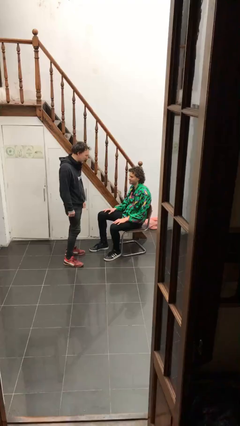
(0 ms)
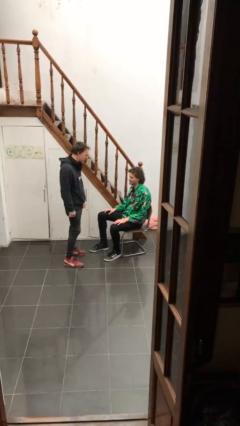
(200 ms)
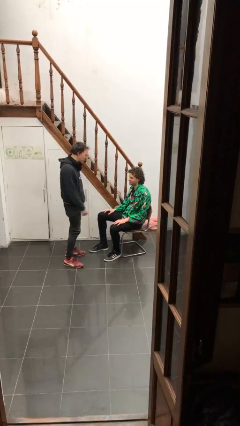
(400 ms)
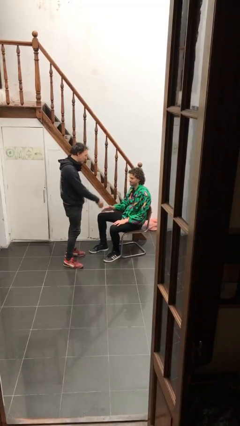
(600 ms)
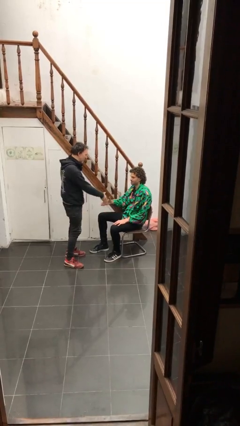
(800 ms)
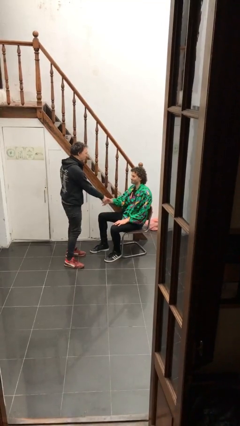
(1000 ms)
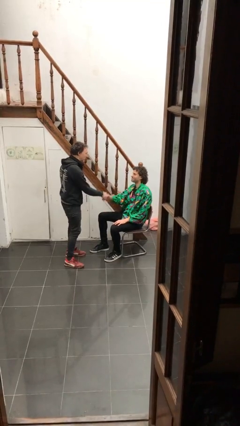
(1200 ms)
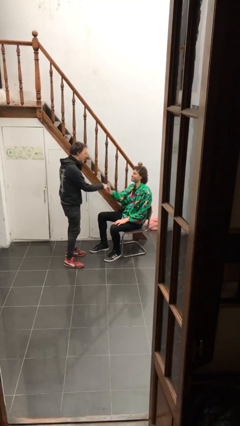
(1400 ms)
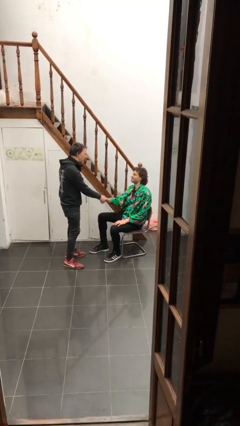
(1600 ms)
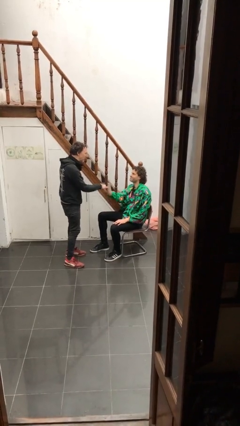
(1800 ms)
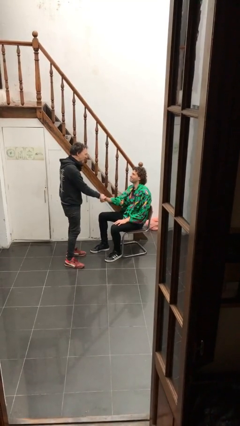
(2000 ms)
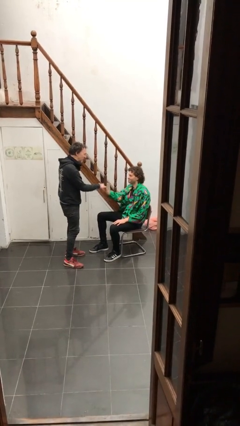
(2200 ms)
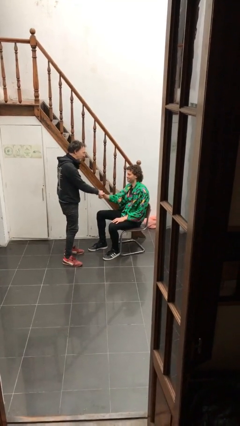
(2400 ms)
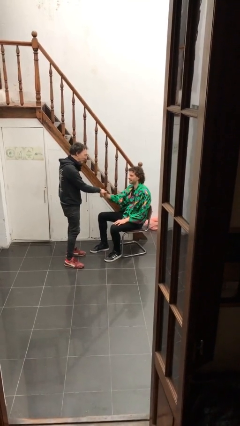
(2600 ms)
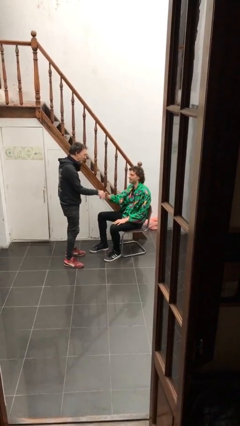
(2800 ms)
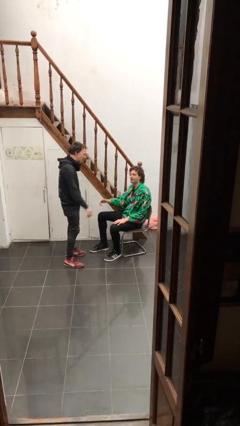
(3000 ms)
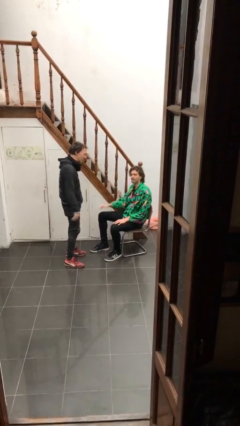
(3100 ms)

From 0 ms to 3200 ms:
person shakes hand

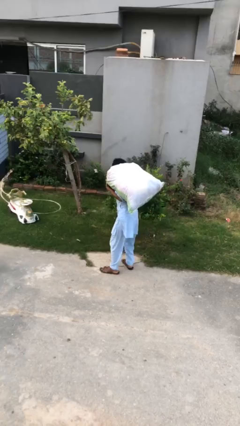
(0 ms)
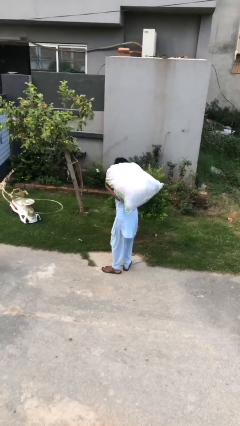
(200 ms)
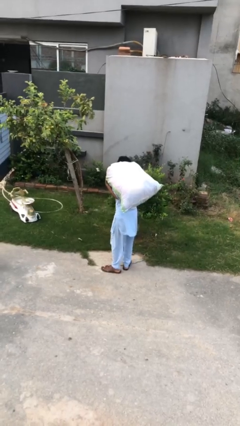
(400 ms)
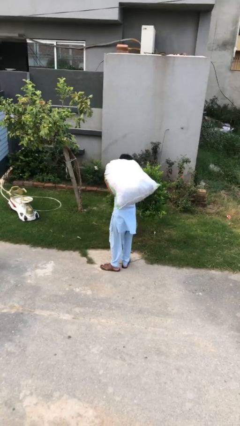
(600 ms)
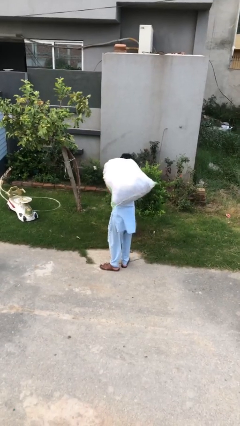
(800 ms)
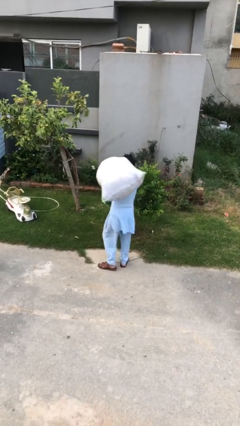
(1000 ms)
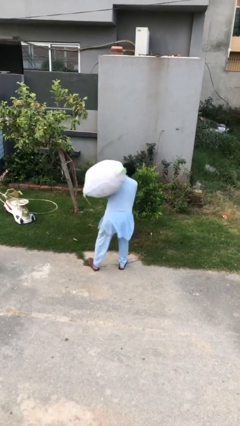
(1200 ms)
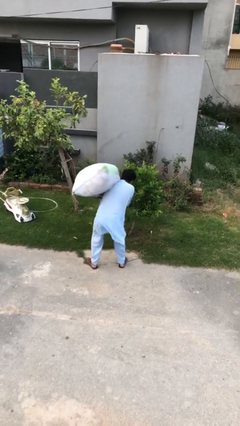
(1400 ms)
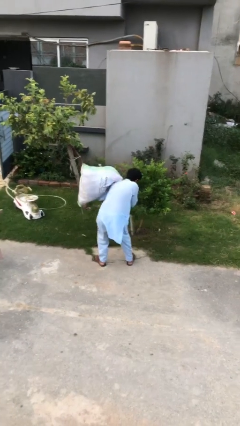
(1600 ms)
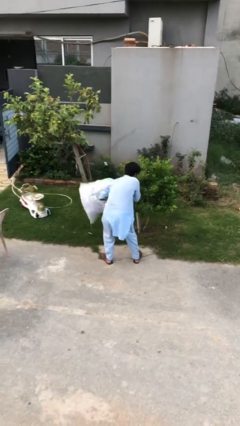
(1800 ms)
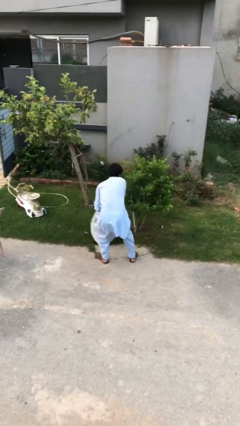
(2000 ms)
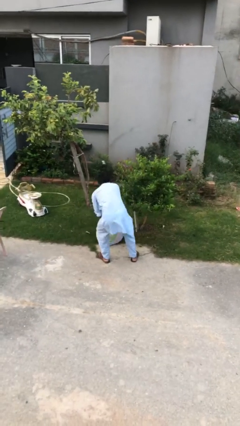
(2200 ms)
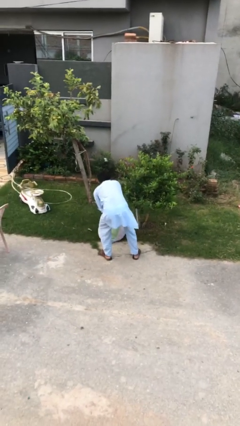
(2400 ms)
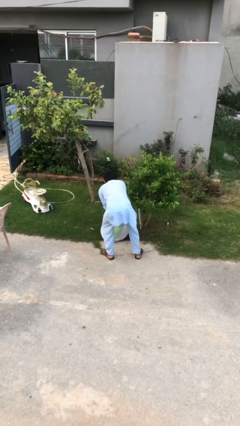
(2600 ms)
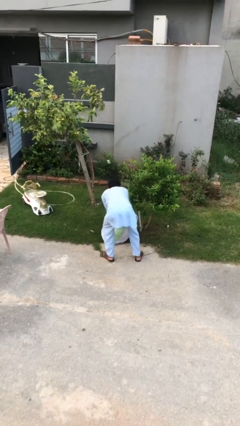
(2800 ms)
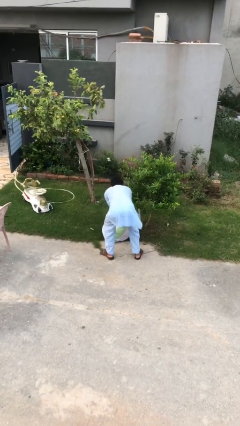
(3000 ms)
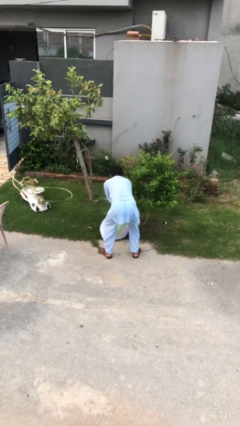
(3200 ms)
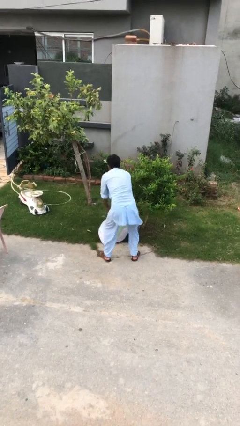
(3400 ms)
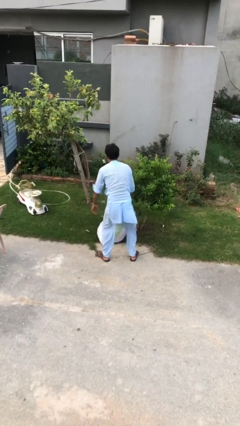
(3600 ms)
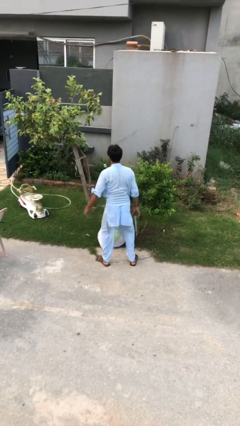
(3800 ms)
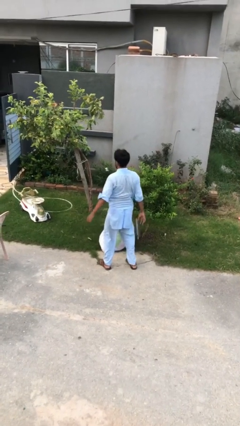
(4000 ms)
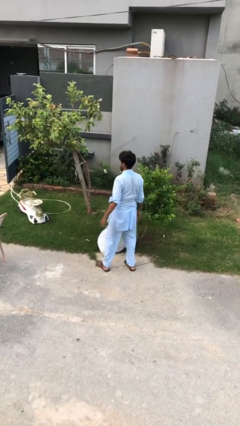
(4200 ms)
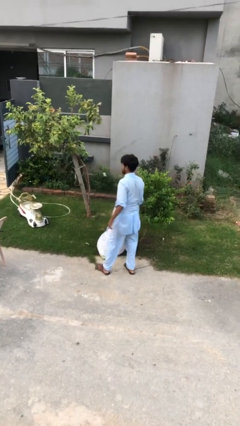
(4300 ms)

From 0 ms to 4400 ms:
person puts down object on floor

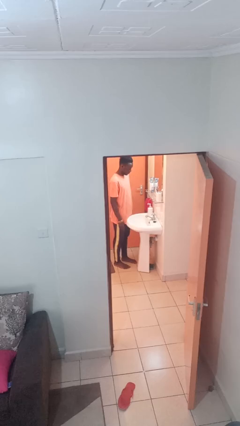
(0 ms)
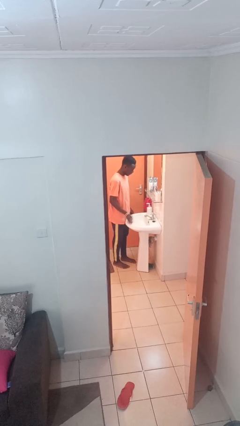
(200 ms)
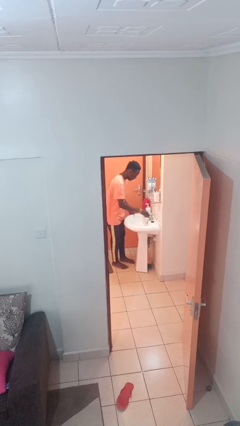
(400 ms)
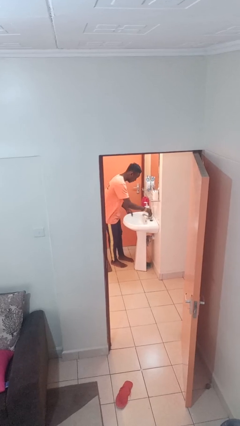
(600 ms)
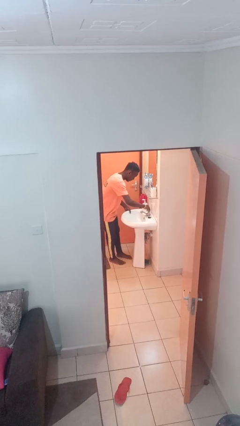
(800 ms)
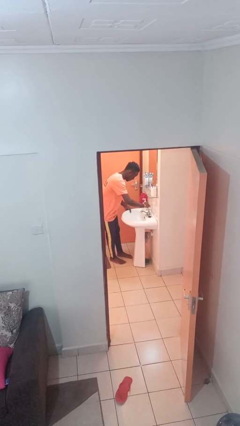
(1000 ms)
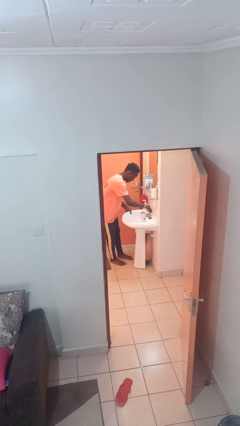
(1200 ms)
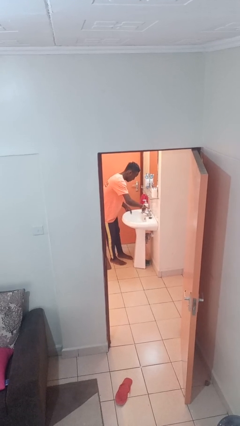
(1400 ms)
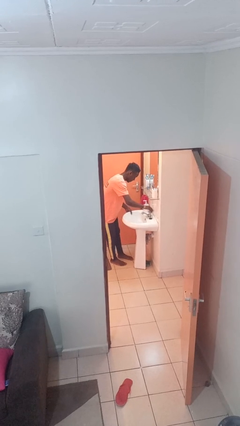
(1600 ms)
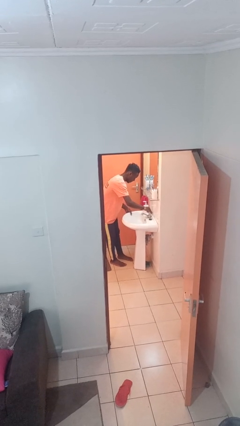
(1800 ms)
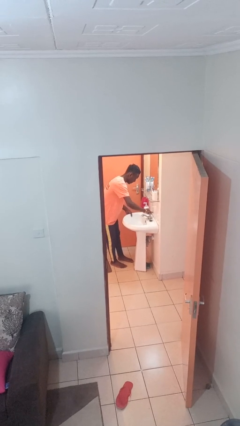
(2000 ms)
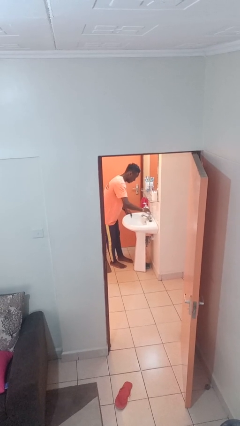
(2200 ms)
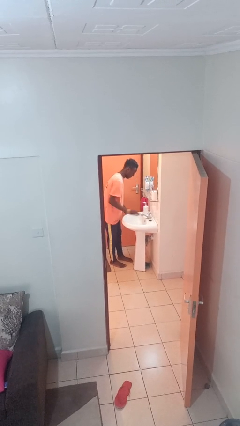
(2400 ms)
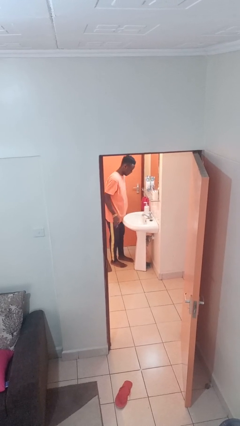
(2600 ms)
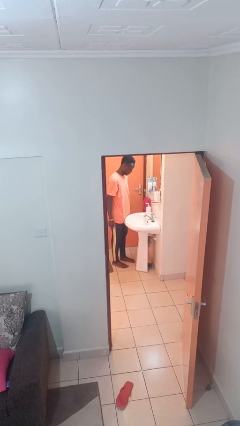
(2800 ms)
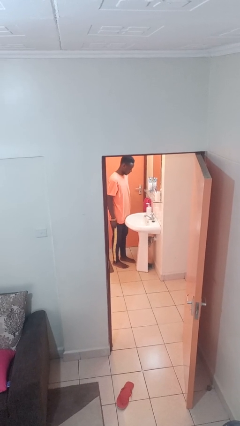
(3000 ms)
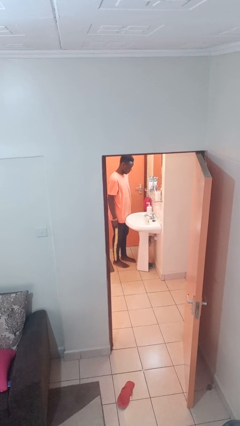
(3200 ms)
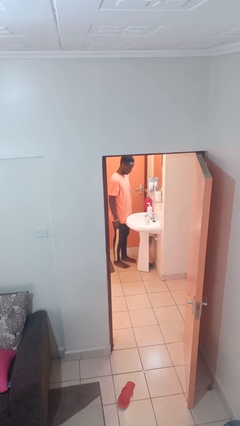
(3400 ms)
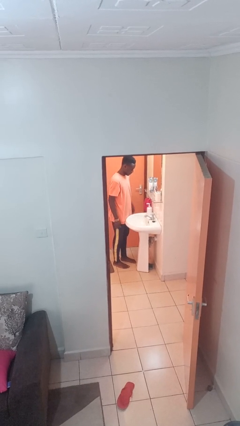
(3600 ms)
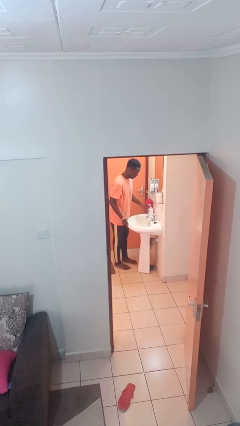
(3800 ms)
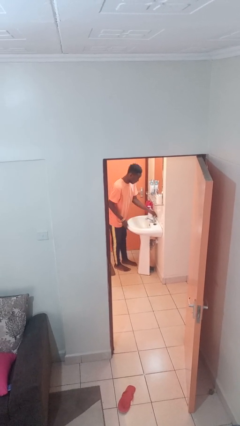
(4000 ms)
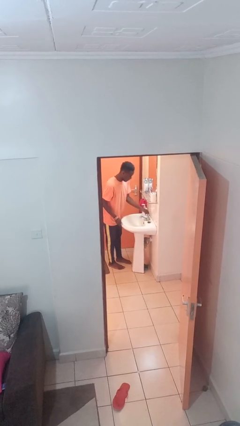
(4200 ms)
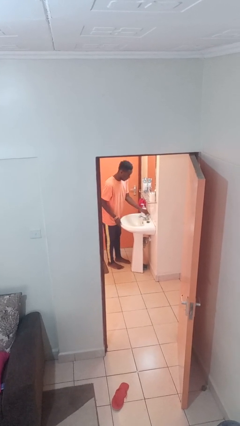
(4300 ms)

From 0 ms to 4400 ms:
person turns on faucet

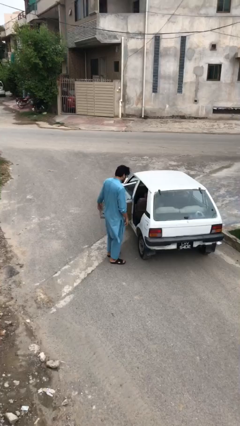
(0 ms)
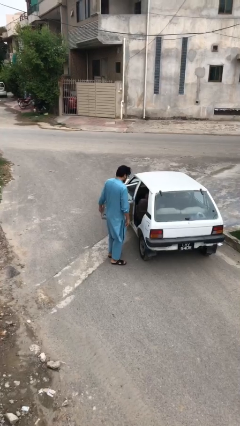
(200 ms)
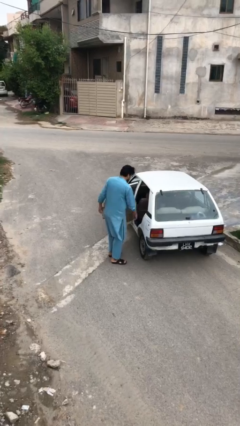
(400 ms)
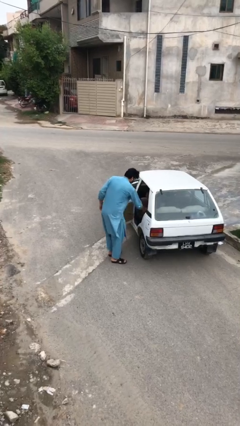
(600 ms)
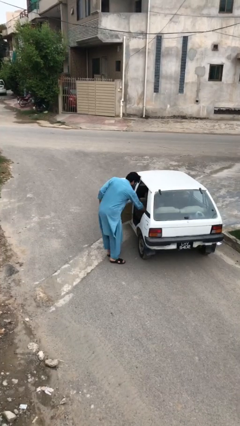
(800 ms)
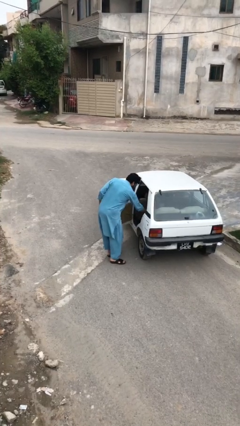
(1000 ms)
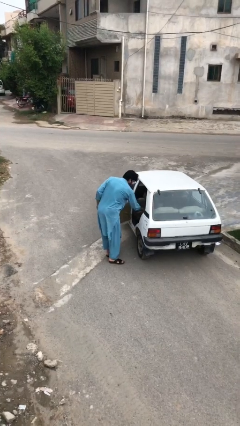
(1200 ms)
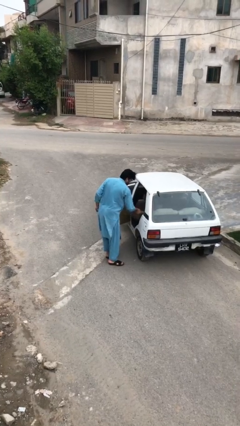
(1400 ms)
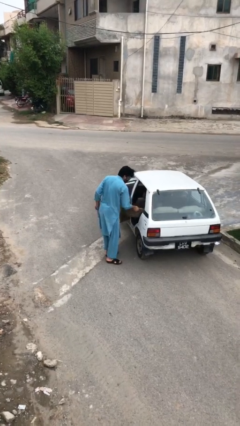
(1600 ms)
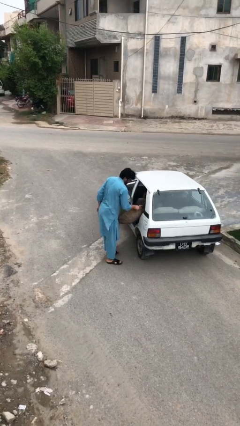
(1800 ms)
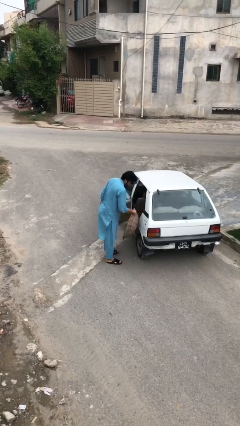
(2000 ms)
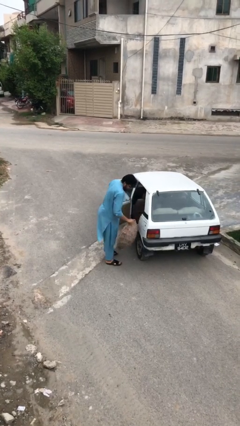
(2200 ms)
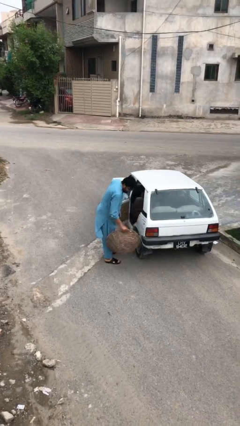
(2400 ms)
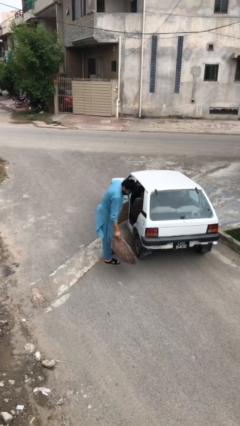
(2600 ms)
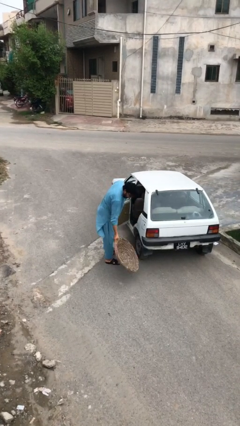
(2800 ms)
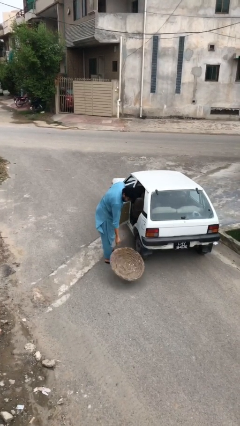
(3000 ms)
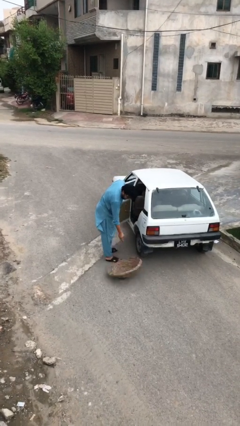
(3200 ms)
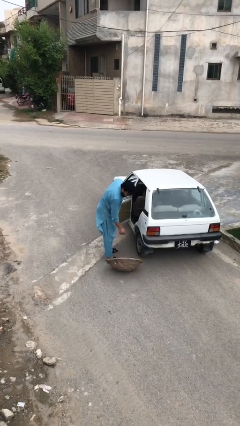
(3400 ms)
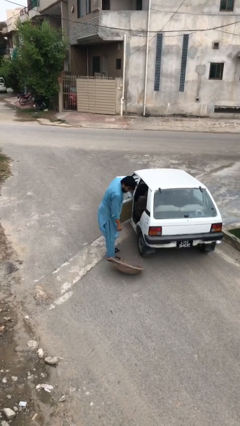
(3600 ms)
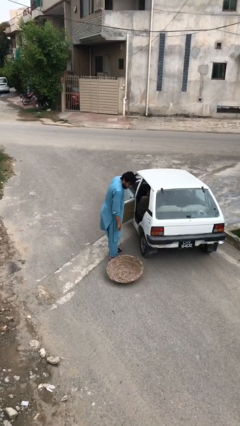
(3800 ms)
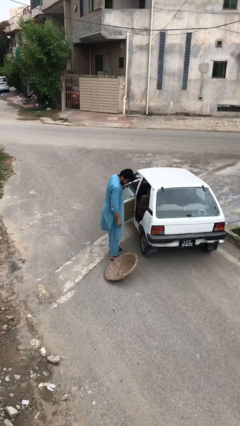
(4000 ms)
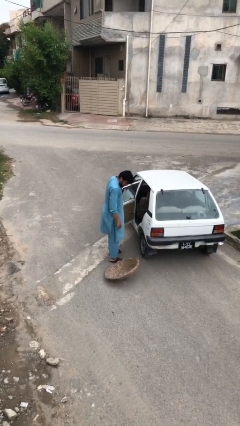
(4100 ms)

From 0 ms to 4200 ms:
person unloads car

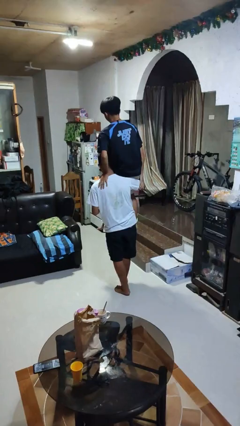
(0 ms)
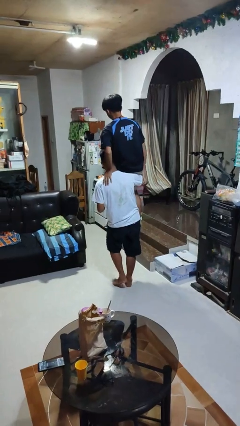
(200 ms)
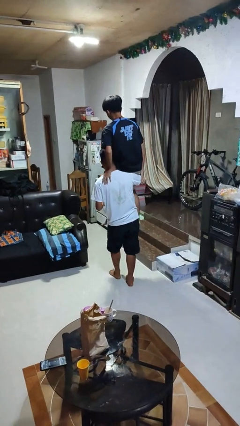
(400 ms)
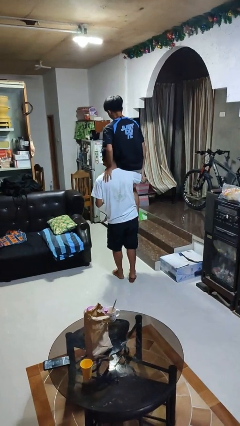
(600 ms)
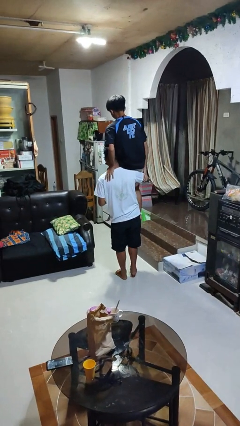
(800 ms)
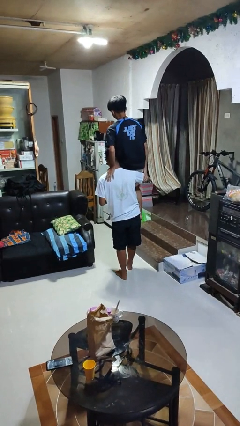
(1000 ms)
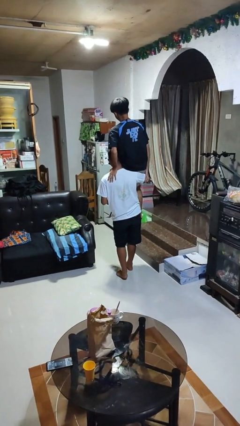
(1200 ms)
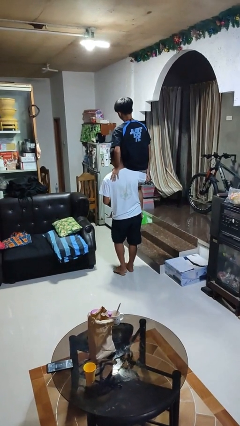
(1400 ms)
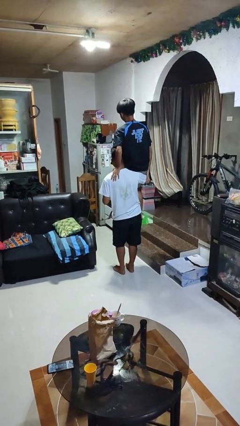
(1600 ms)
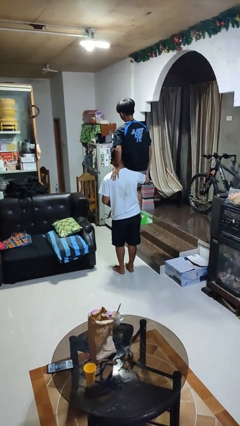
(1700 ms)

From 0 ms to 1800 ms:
person carries person on shoulders
